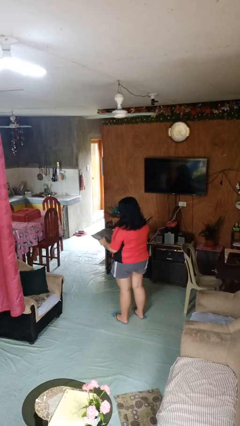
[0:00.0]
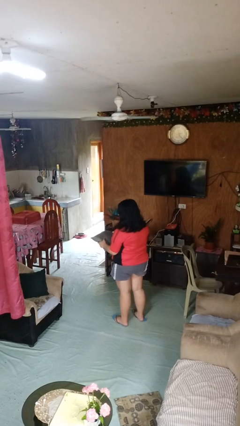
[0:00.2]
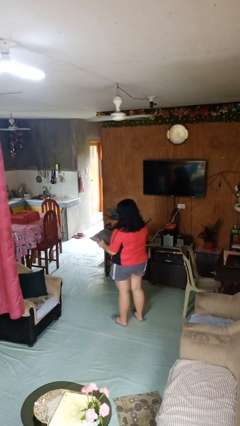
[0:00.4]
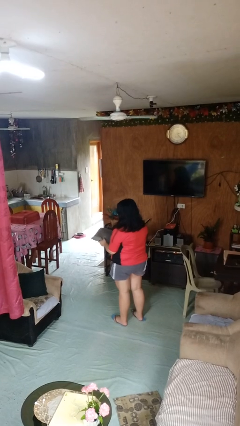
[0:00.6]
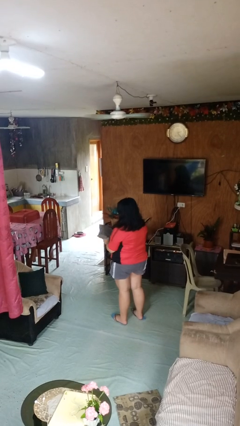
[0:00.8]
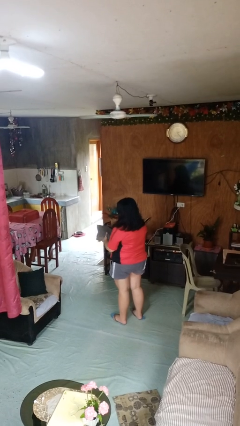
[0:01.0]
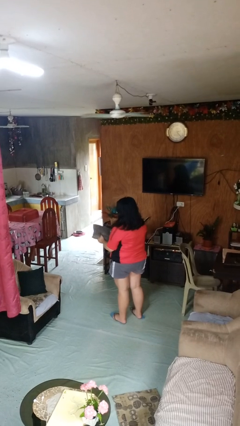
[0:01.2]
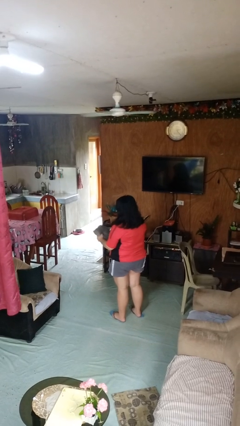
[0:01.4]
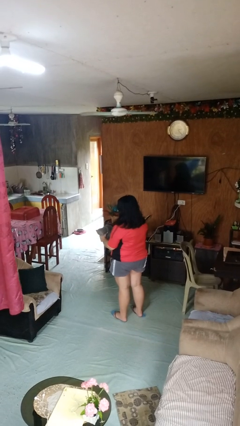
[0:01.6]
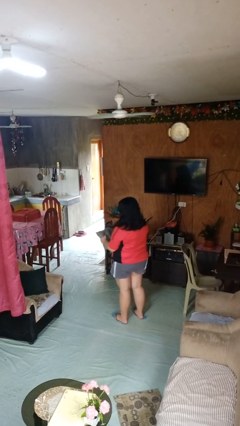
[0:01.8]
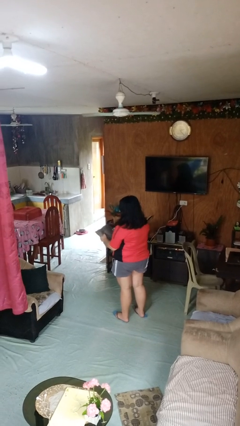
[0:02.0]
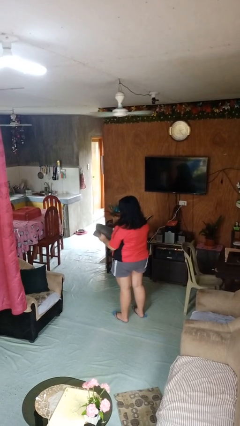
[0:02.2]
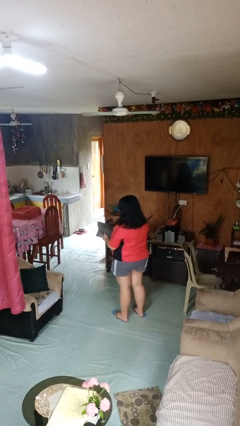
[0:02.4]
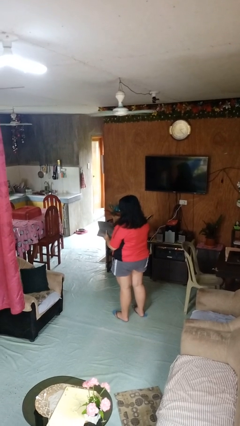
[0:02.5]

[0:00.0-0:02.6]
person squeezes object

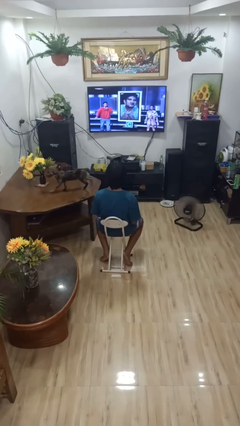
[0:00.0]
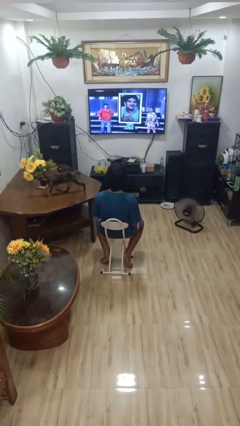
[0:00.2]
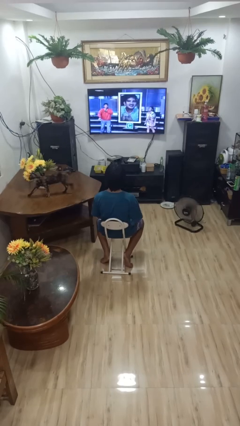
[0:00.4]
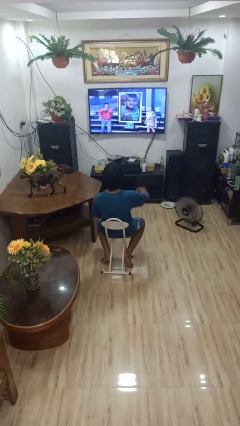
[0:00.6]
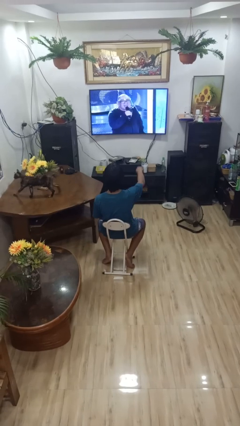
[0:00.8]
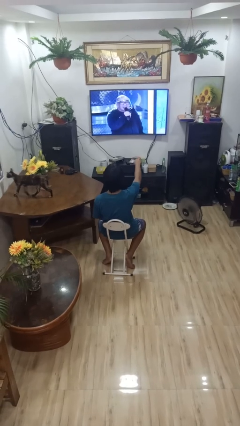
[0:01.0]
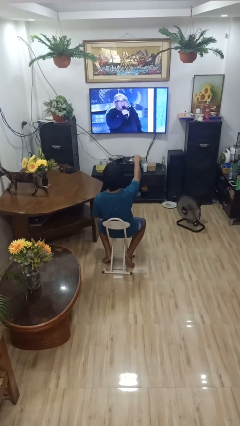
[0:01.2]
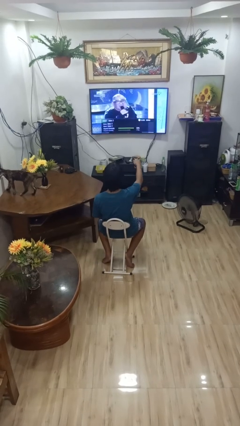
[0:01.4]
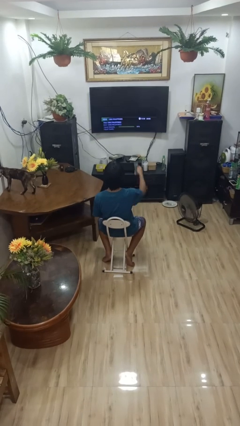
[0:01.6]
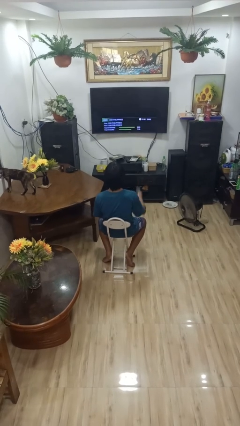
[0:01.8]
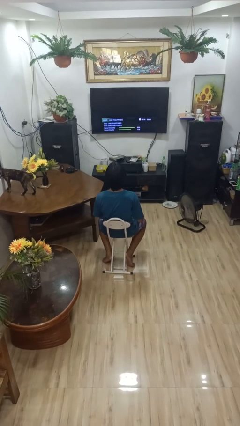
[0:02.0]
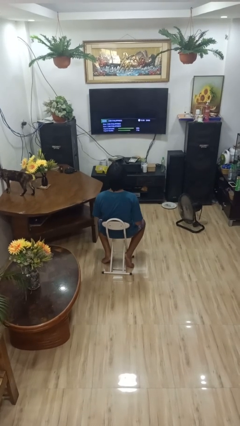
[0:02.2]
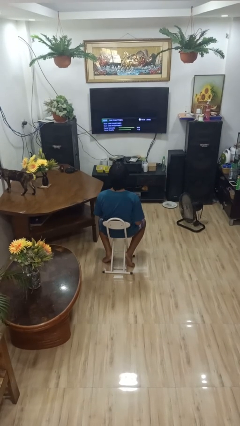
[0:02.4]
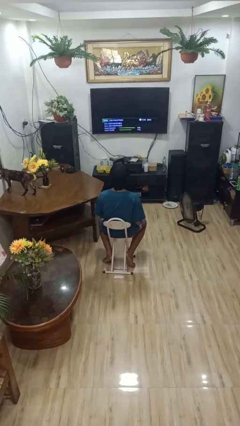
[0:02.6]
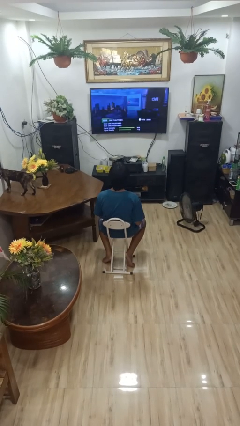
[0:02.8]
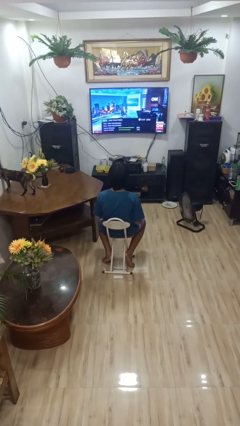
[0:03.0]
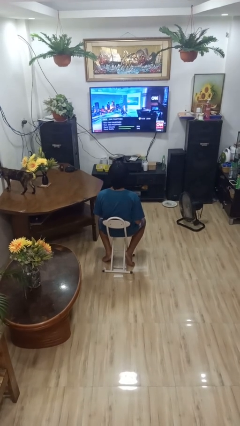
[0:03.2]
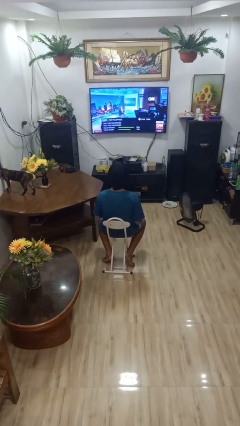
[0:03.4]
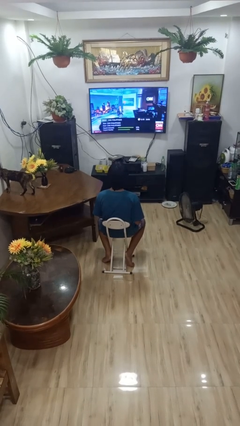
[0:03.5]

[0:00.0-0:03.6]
person uses television remote

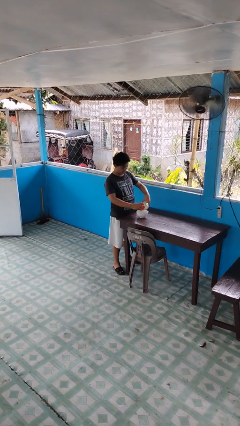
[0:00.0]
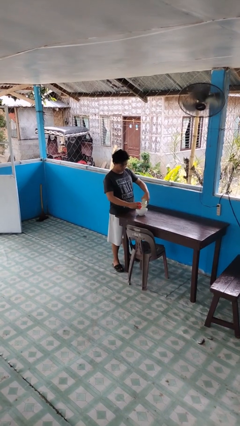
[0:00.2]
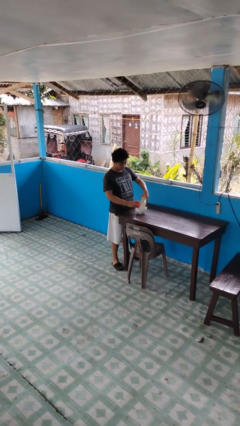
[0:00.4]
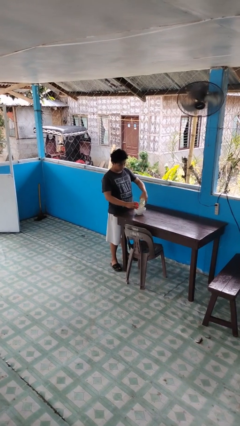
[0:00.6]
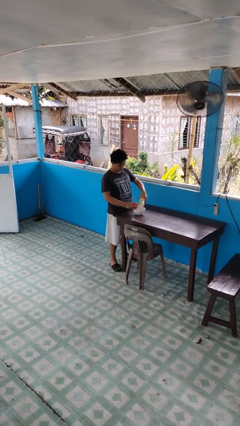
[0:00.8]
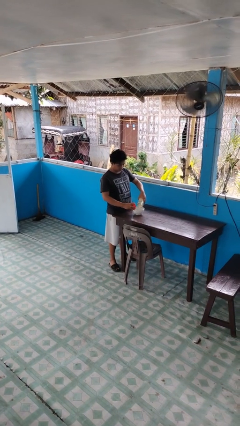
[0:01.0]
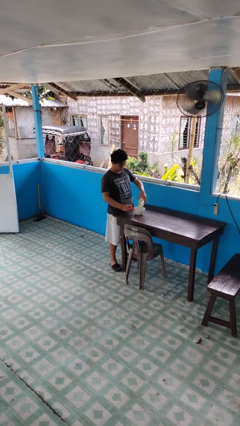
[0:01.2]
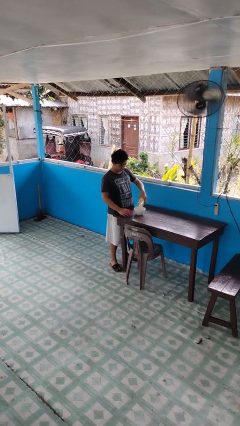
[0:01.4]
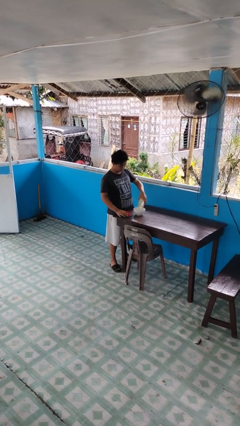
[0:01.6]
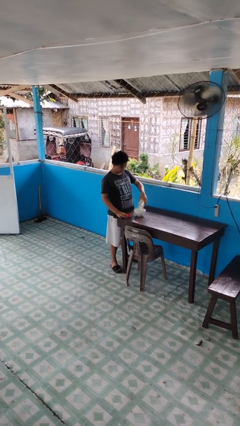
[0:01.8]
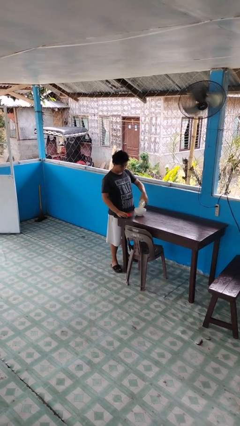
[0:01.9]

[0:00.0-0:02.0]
person pours into bowl

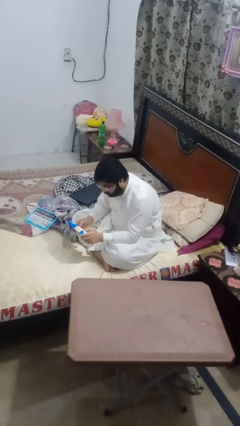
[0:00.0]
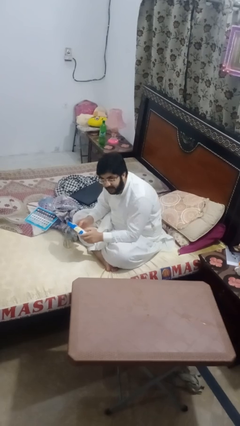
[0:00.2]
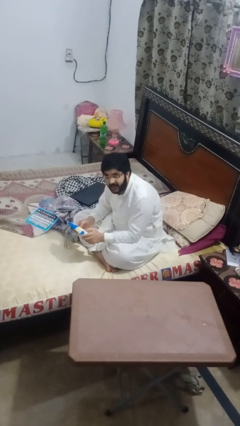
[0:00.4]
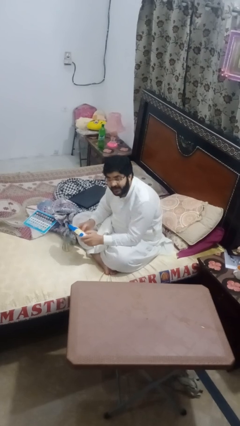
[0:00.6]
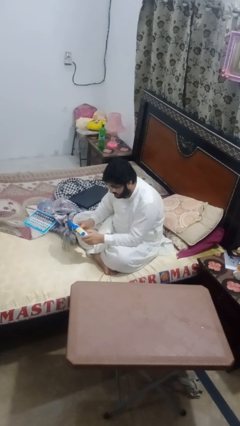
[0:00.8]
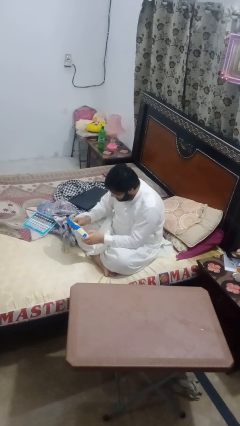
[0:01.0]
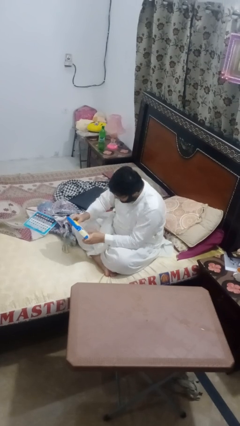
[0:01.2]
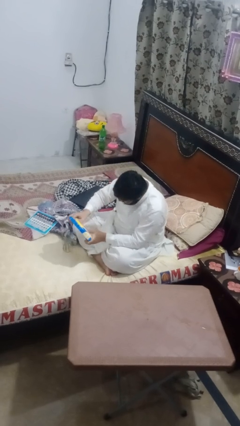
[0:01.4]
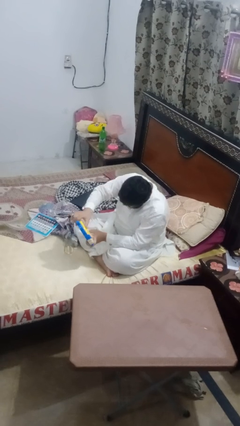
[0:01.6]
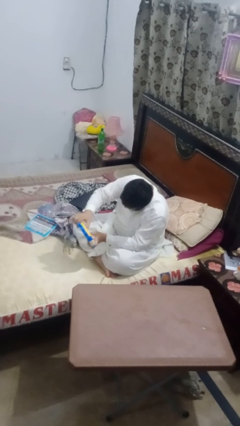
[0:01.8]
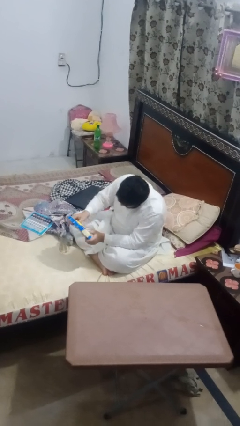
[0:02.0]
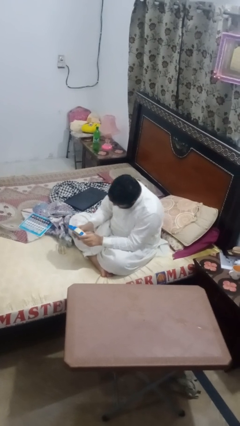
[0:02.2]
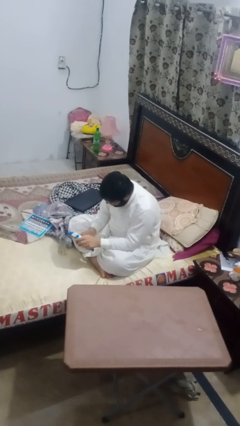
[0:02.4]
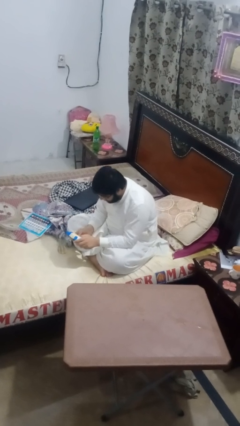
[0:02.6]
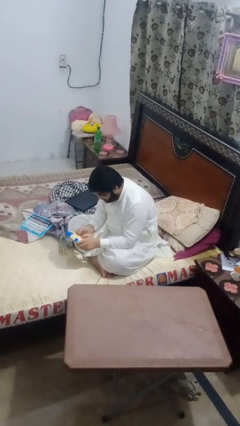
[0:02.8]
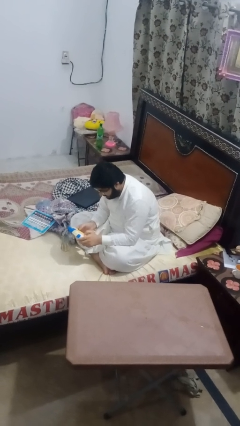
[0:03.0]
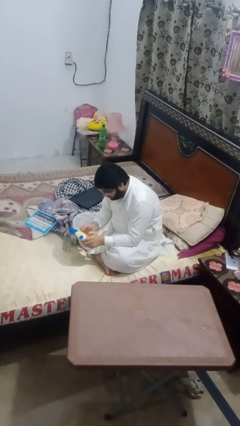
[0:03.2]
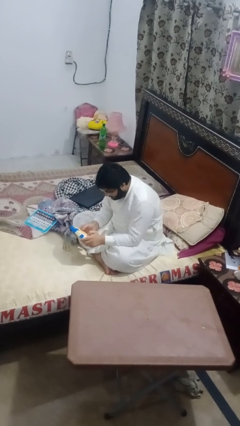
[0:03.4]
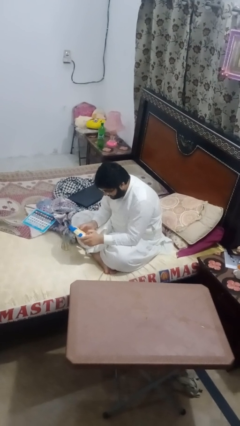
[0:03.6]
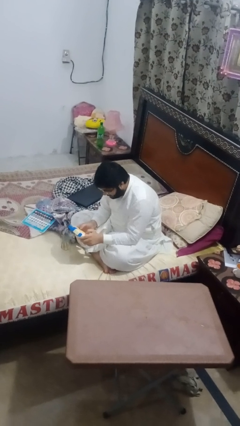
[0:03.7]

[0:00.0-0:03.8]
person interacts with handheld game

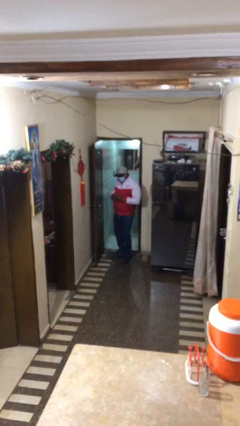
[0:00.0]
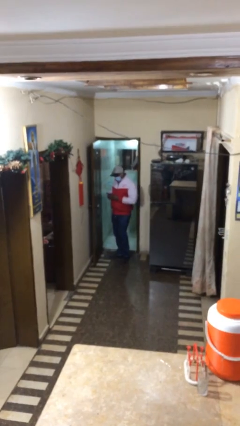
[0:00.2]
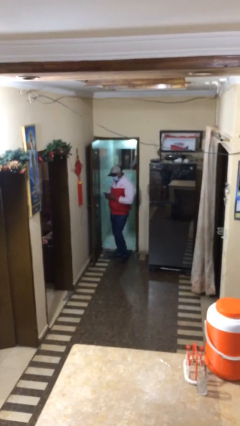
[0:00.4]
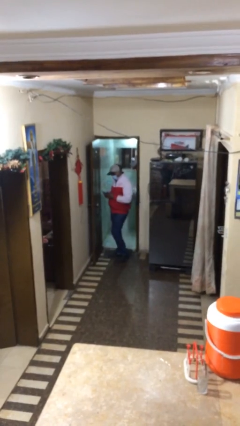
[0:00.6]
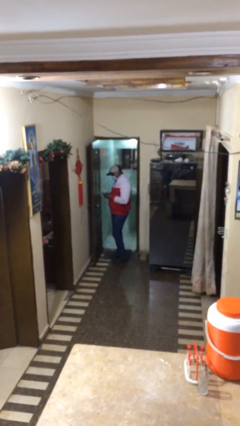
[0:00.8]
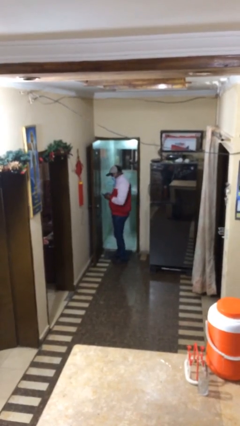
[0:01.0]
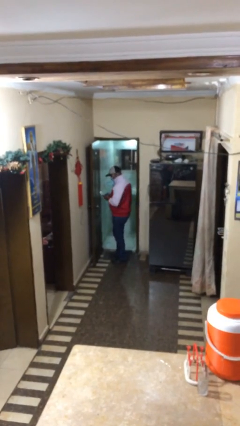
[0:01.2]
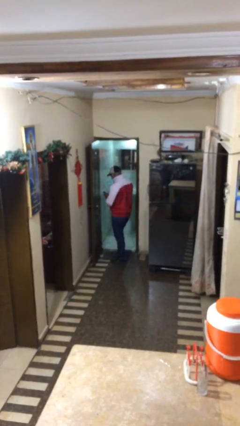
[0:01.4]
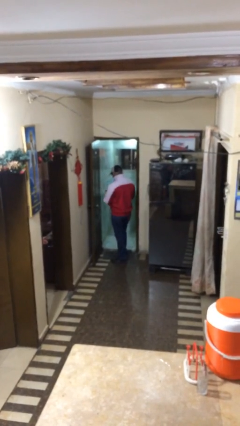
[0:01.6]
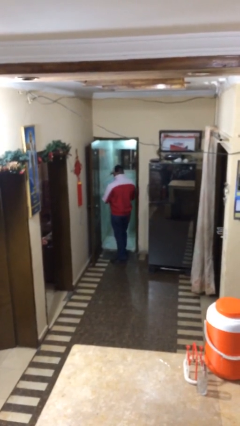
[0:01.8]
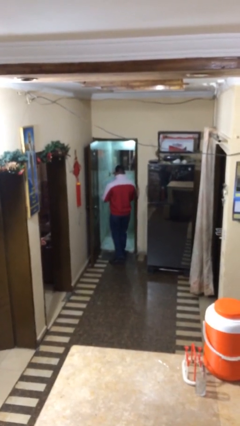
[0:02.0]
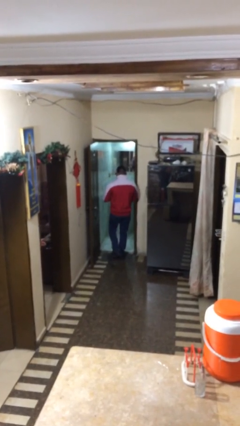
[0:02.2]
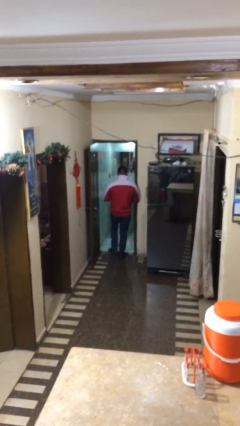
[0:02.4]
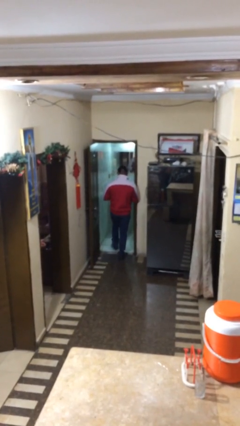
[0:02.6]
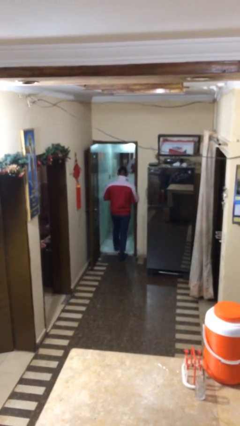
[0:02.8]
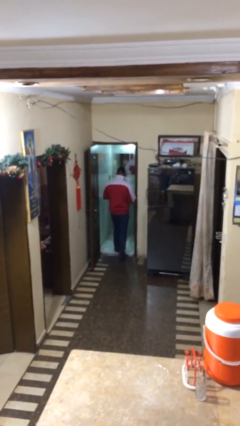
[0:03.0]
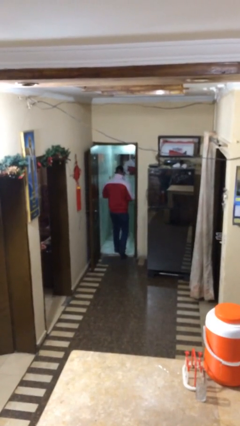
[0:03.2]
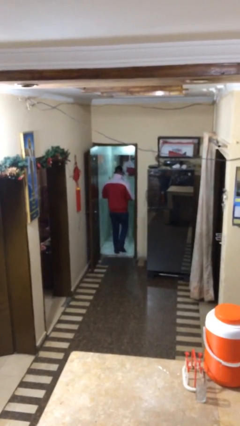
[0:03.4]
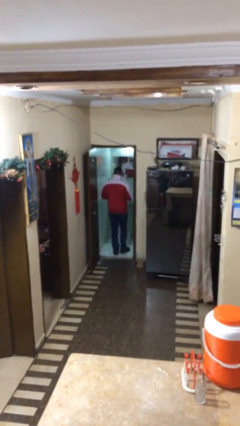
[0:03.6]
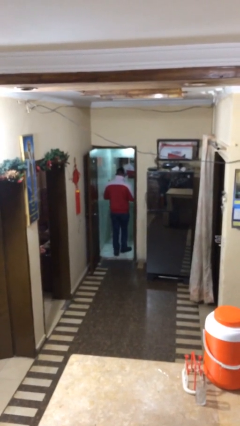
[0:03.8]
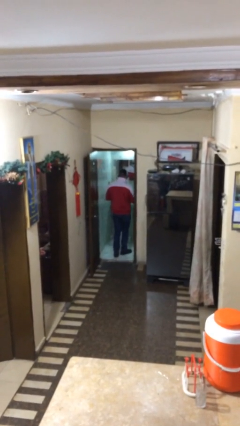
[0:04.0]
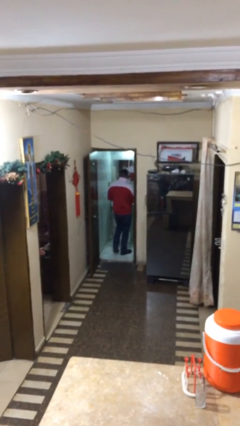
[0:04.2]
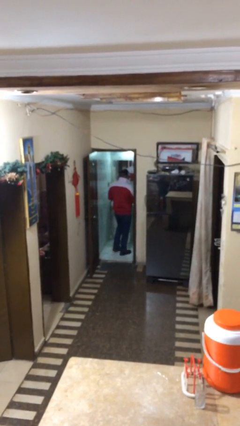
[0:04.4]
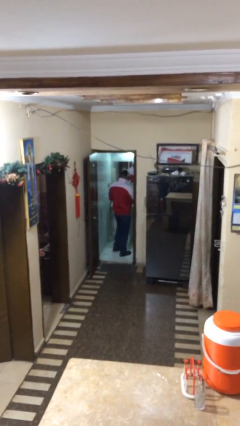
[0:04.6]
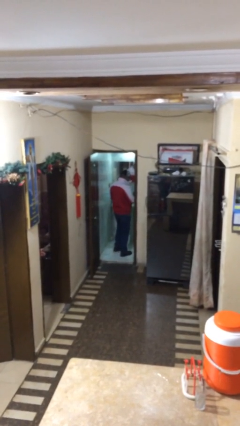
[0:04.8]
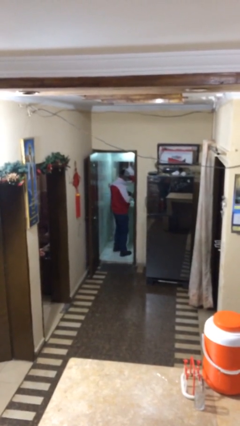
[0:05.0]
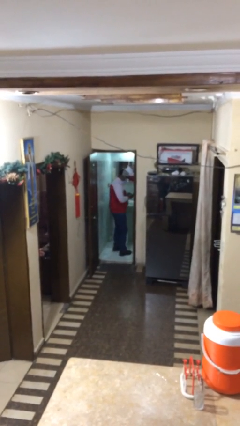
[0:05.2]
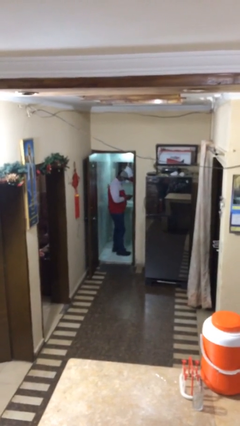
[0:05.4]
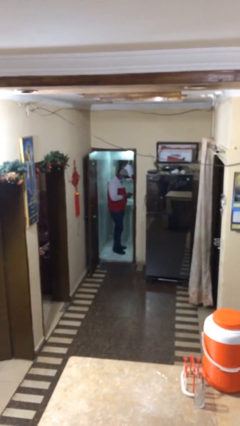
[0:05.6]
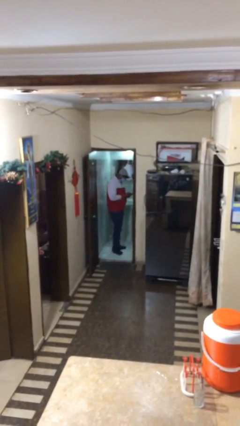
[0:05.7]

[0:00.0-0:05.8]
person exits scene through structure
